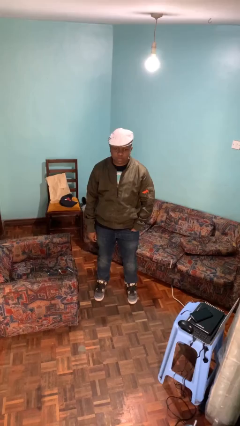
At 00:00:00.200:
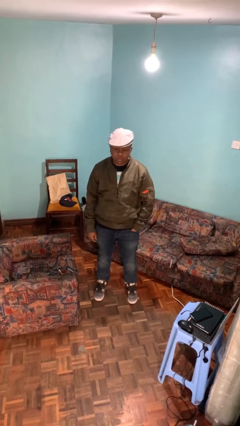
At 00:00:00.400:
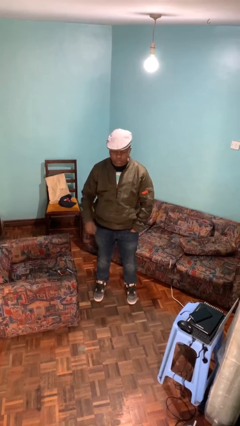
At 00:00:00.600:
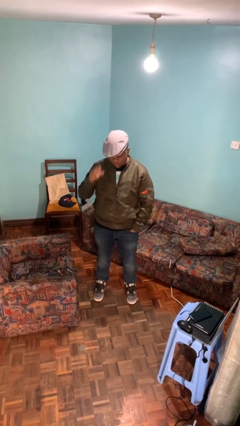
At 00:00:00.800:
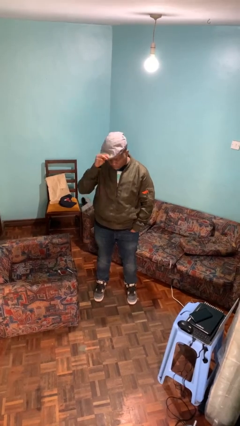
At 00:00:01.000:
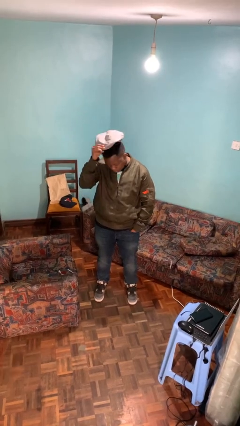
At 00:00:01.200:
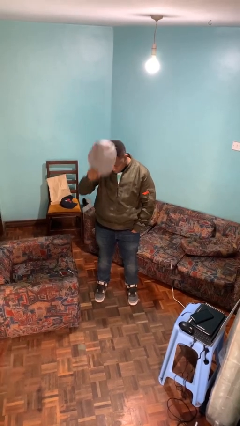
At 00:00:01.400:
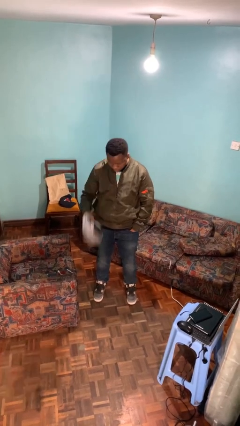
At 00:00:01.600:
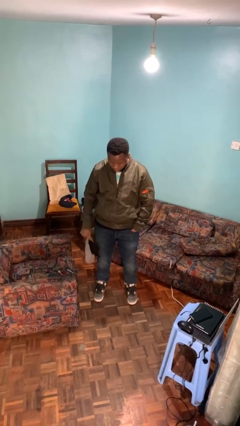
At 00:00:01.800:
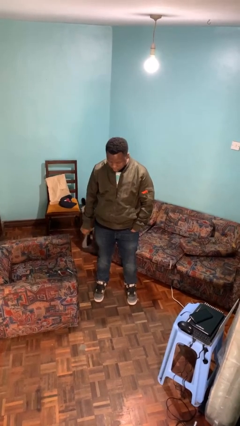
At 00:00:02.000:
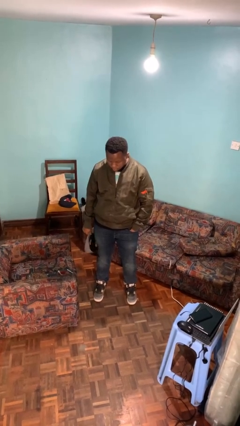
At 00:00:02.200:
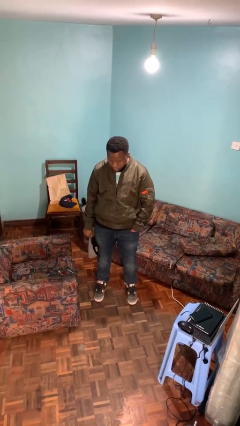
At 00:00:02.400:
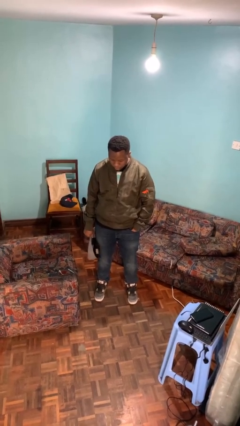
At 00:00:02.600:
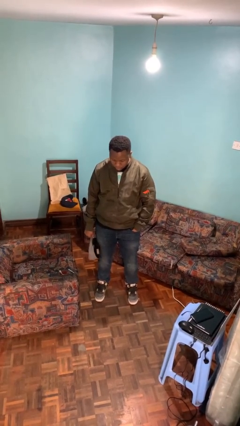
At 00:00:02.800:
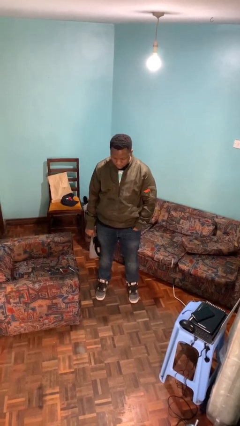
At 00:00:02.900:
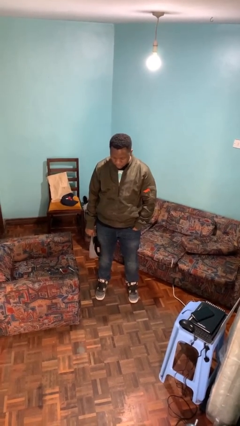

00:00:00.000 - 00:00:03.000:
person takes off hat

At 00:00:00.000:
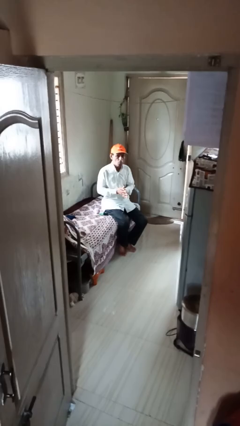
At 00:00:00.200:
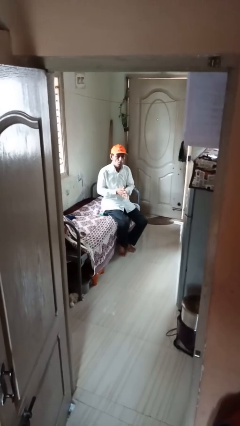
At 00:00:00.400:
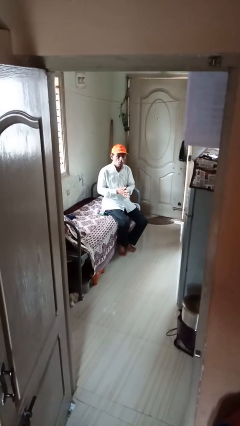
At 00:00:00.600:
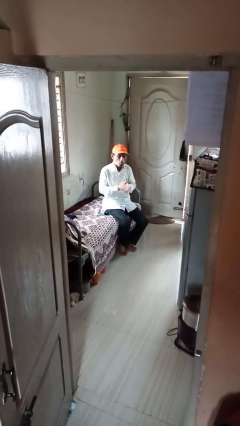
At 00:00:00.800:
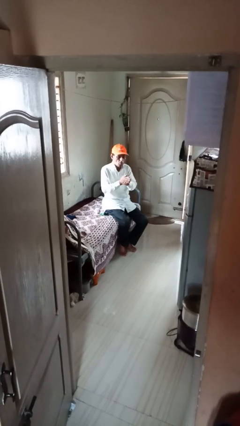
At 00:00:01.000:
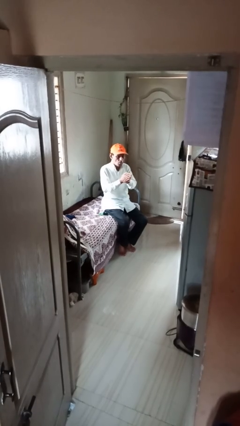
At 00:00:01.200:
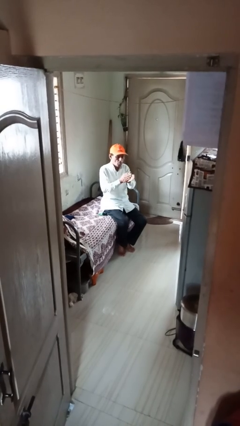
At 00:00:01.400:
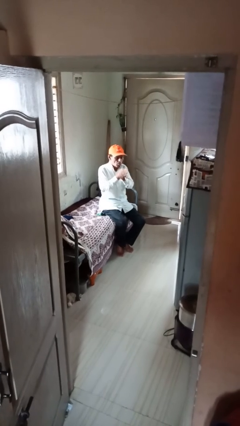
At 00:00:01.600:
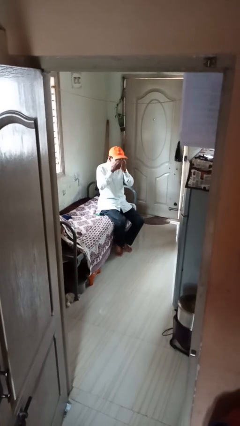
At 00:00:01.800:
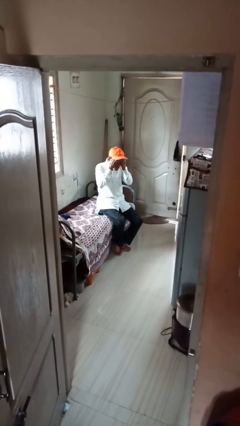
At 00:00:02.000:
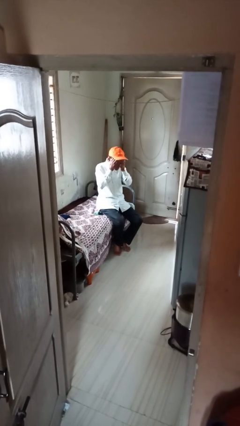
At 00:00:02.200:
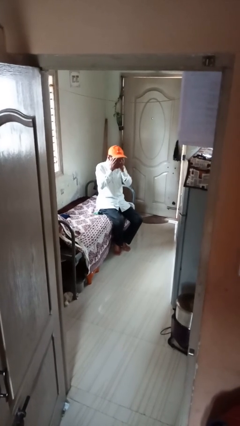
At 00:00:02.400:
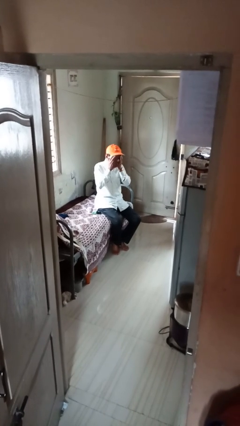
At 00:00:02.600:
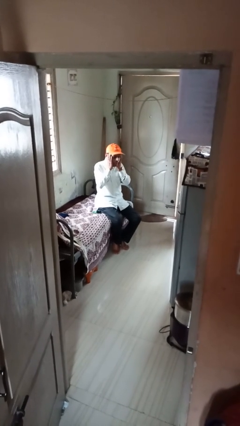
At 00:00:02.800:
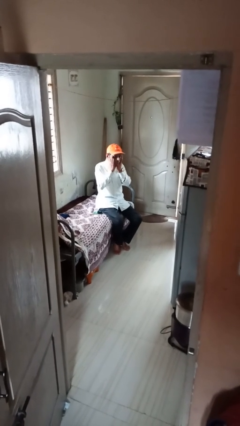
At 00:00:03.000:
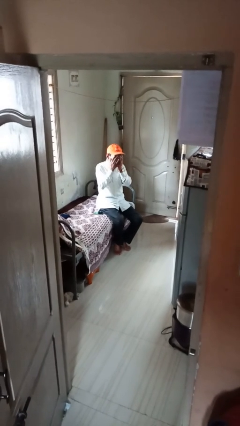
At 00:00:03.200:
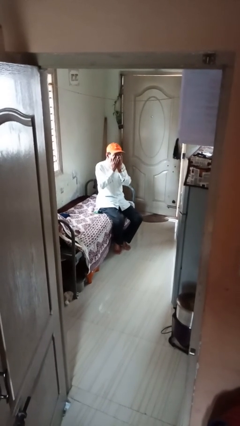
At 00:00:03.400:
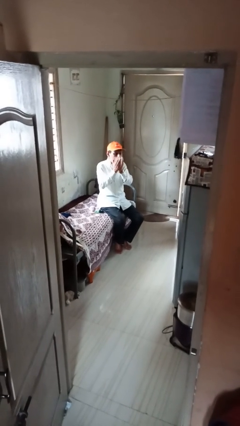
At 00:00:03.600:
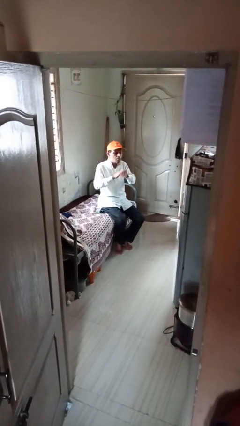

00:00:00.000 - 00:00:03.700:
person applies sunscreen

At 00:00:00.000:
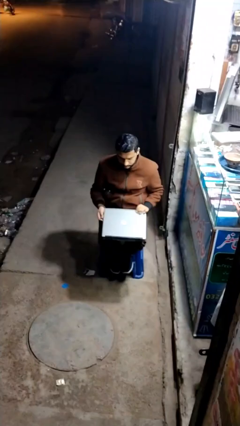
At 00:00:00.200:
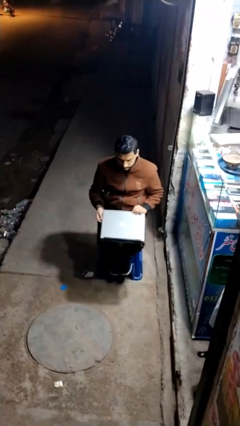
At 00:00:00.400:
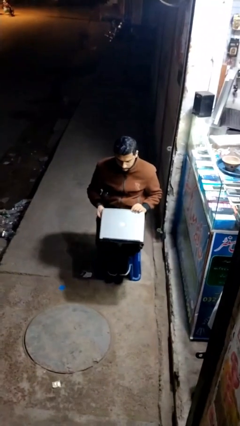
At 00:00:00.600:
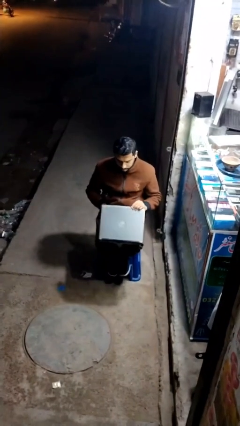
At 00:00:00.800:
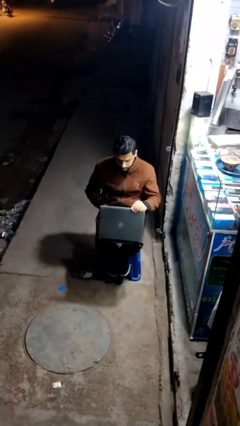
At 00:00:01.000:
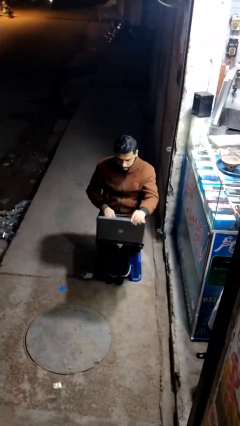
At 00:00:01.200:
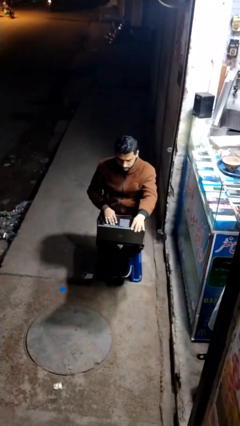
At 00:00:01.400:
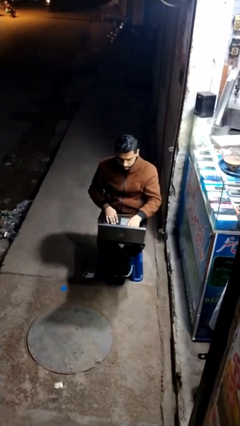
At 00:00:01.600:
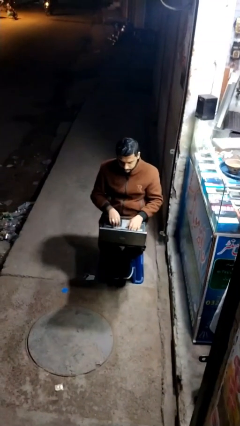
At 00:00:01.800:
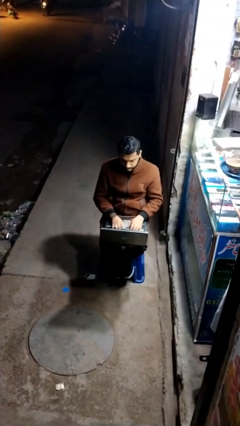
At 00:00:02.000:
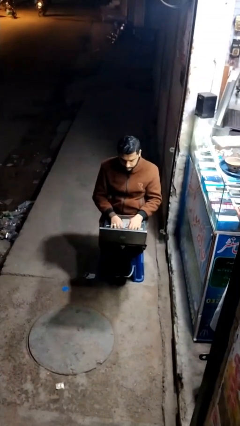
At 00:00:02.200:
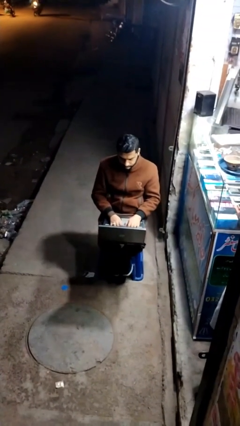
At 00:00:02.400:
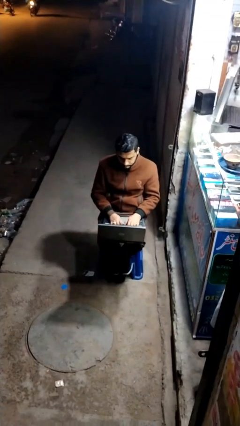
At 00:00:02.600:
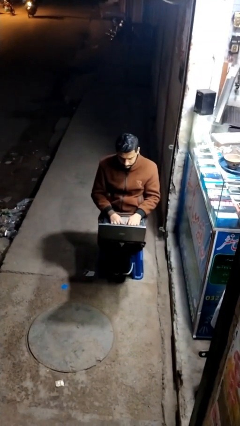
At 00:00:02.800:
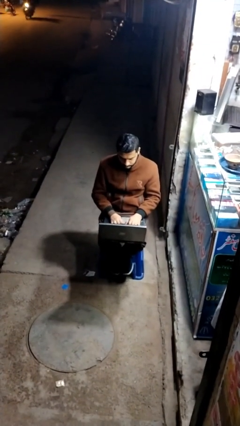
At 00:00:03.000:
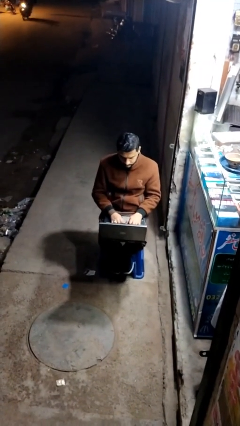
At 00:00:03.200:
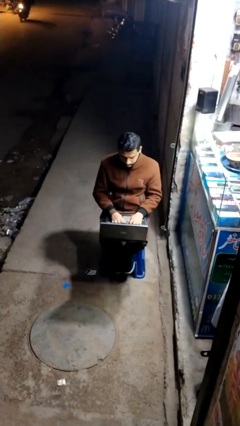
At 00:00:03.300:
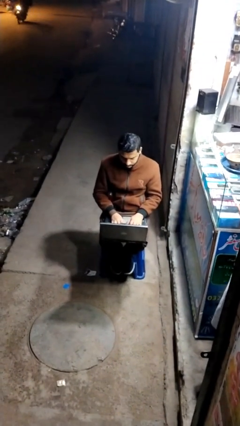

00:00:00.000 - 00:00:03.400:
person interacts with laptop

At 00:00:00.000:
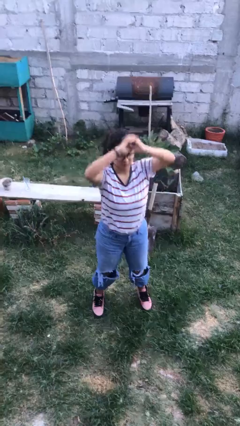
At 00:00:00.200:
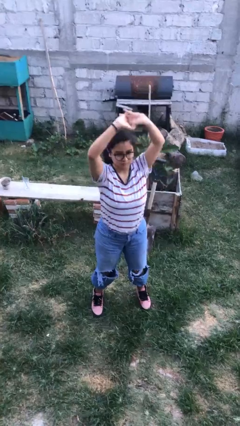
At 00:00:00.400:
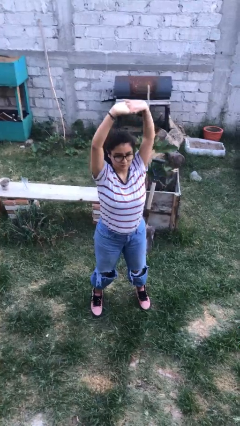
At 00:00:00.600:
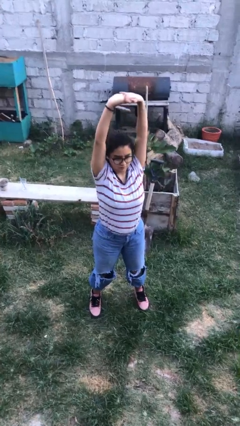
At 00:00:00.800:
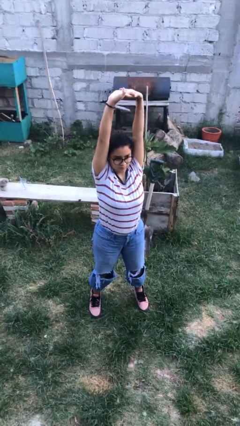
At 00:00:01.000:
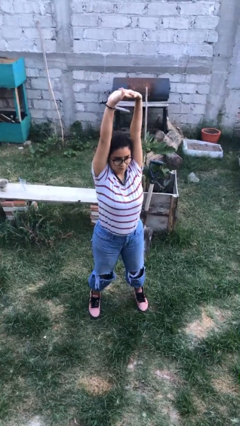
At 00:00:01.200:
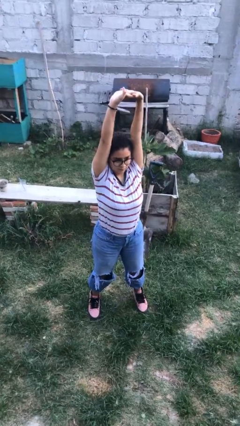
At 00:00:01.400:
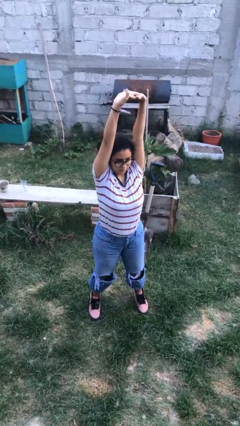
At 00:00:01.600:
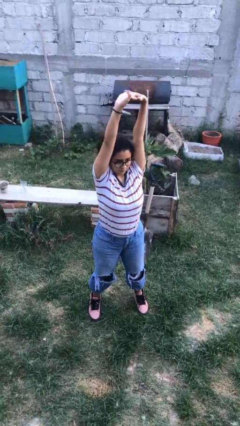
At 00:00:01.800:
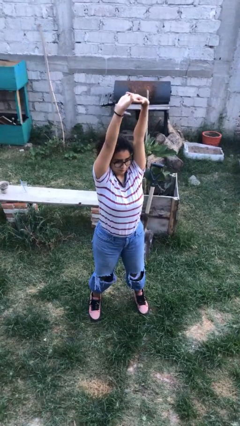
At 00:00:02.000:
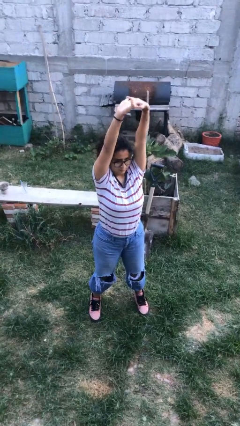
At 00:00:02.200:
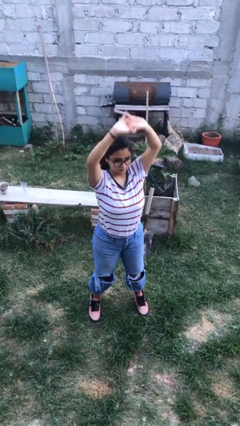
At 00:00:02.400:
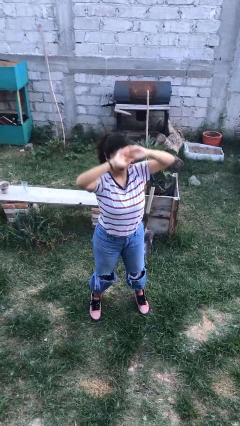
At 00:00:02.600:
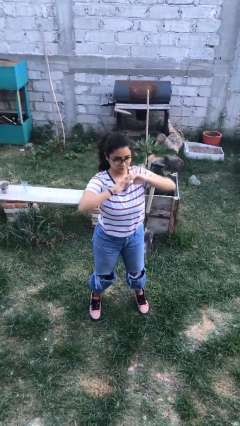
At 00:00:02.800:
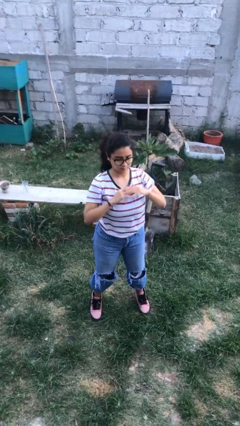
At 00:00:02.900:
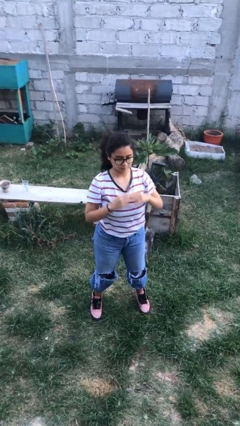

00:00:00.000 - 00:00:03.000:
person stretches arms over head

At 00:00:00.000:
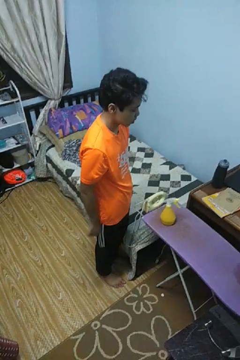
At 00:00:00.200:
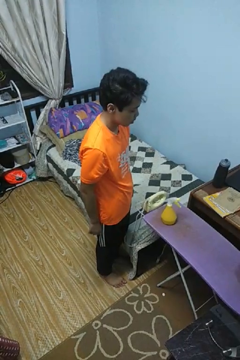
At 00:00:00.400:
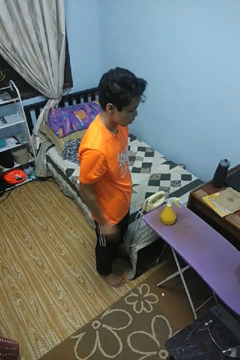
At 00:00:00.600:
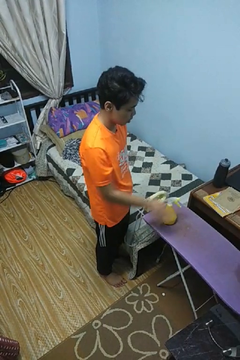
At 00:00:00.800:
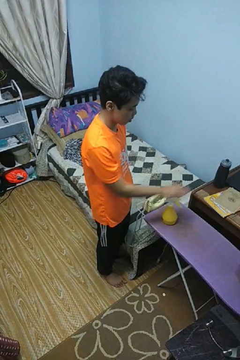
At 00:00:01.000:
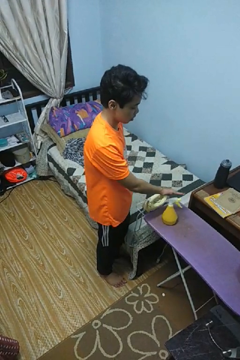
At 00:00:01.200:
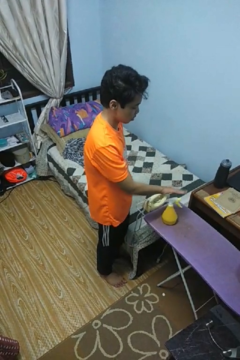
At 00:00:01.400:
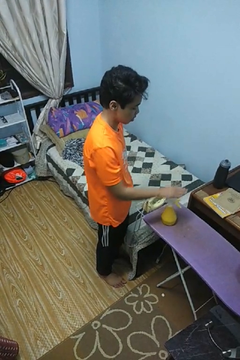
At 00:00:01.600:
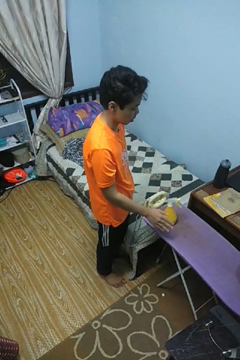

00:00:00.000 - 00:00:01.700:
person waves hand over object

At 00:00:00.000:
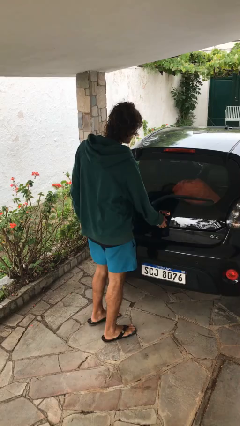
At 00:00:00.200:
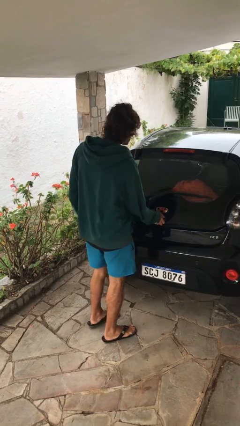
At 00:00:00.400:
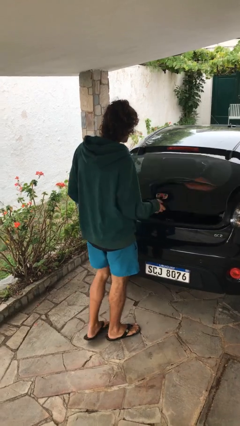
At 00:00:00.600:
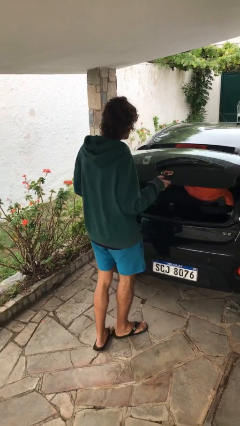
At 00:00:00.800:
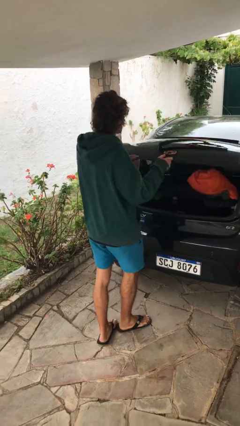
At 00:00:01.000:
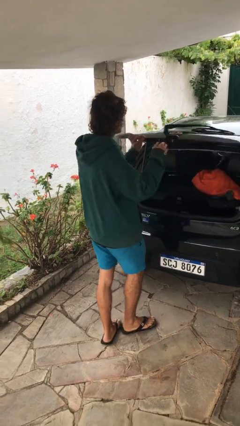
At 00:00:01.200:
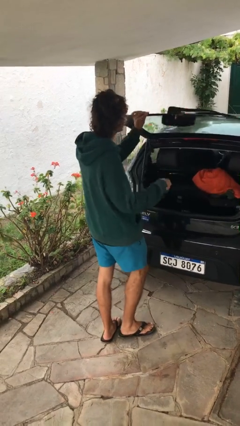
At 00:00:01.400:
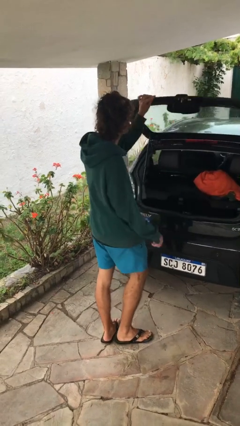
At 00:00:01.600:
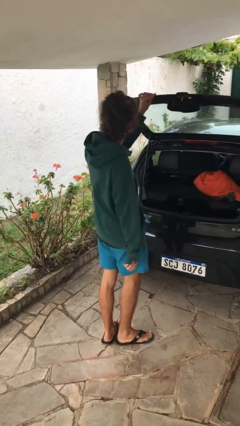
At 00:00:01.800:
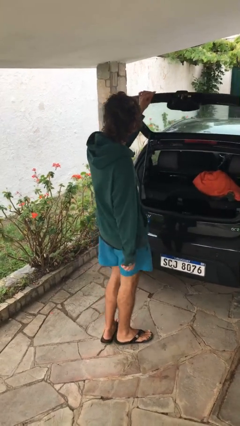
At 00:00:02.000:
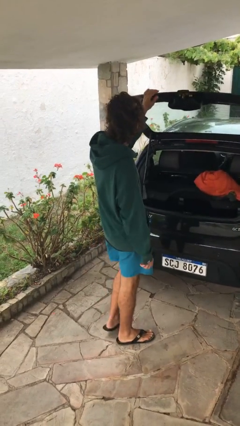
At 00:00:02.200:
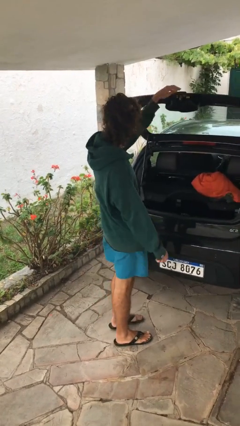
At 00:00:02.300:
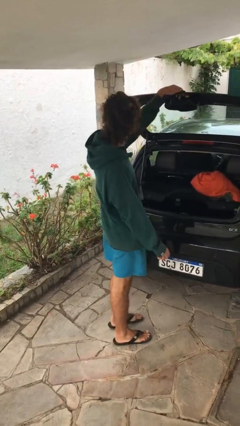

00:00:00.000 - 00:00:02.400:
person opens car trunk

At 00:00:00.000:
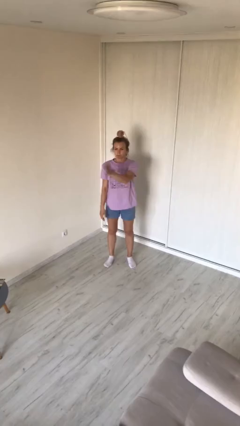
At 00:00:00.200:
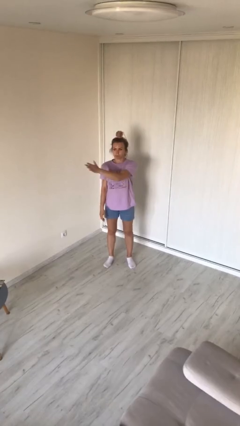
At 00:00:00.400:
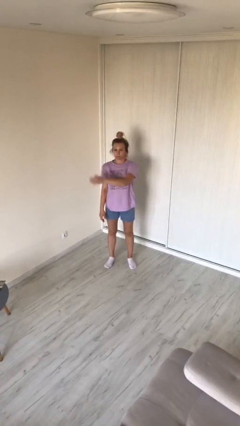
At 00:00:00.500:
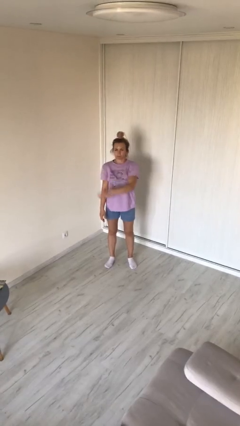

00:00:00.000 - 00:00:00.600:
person gestures swipe right
